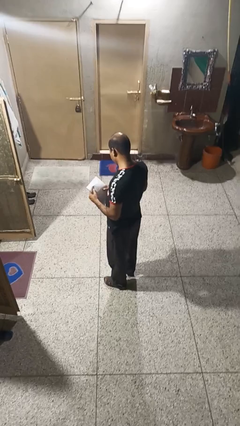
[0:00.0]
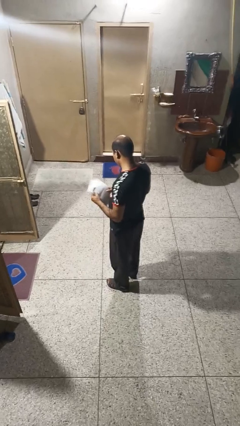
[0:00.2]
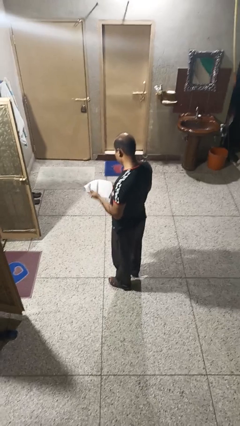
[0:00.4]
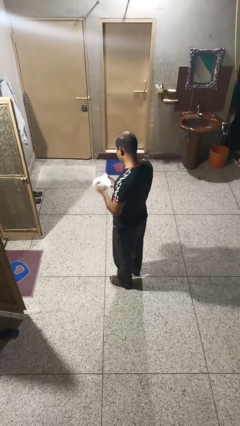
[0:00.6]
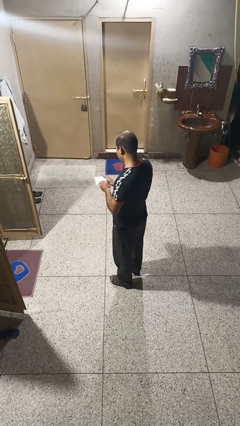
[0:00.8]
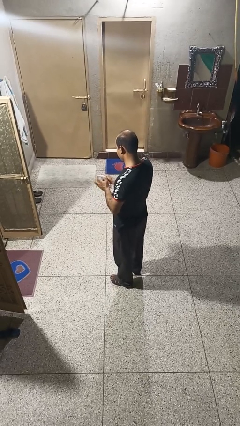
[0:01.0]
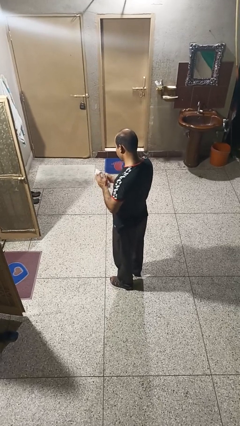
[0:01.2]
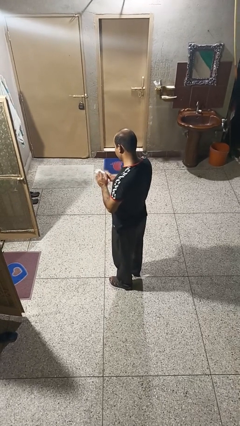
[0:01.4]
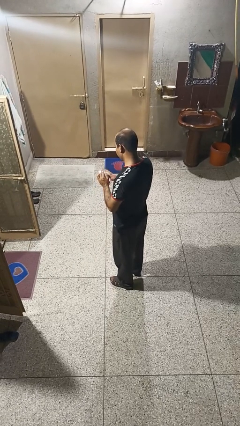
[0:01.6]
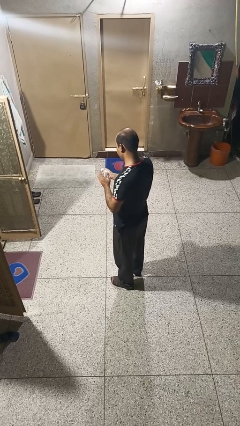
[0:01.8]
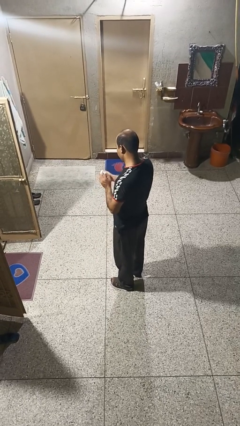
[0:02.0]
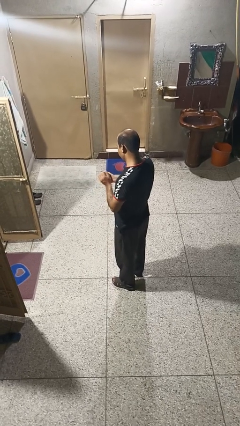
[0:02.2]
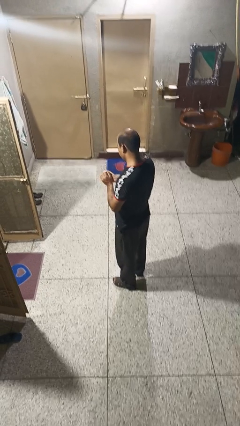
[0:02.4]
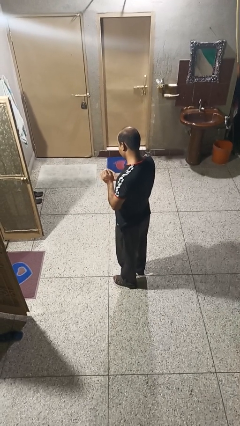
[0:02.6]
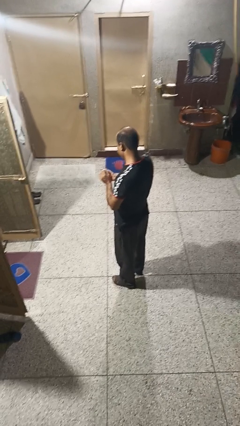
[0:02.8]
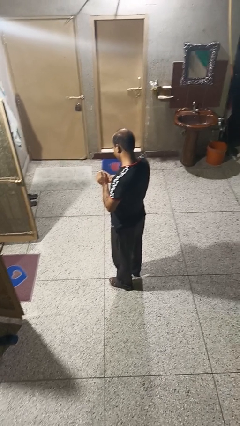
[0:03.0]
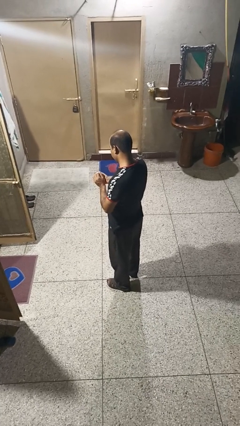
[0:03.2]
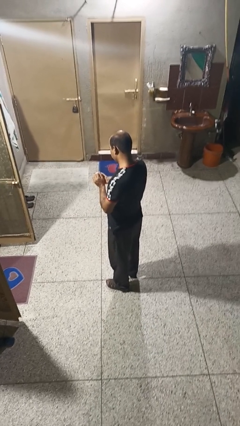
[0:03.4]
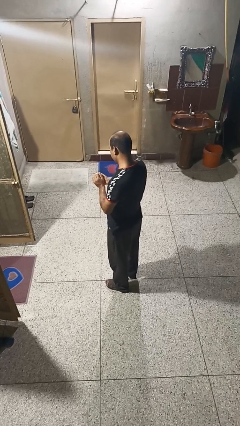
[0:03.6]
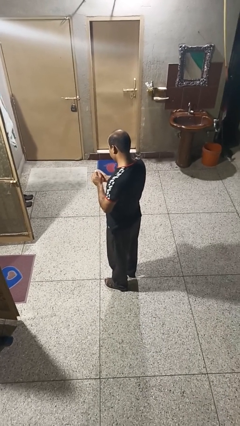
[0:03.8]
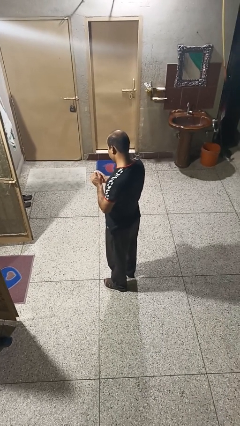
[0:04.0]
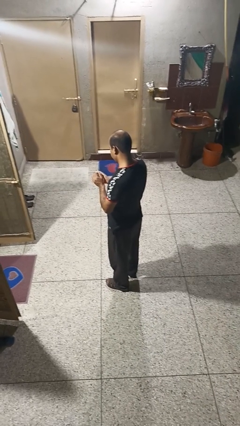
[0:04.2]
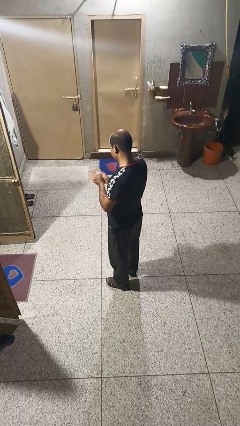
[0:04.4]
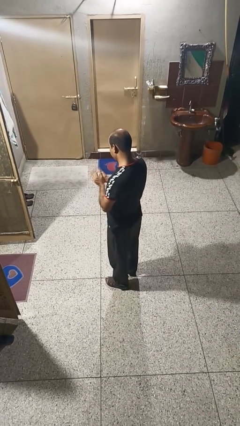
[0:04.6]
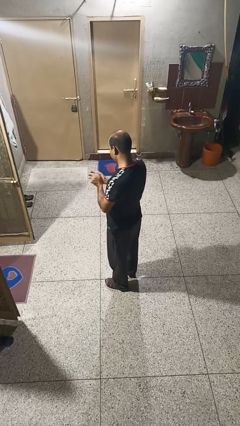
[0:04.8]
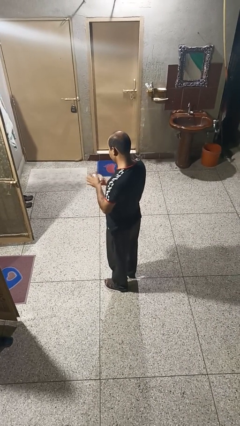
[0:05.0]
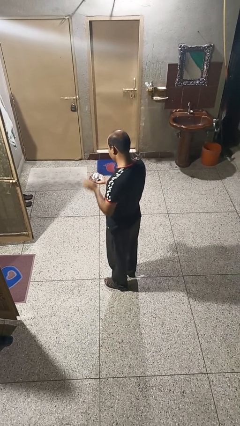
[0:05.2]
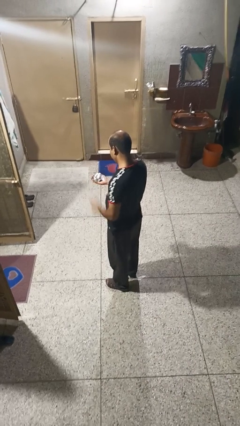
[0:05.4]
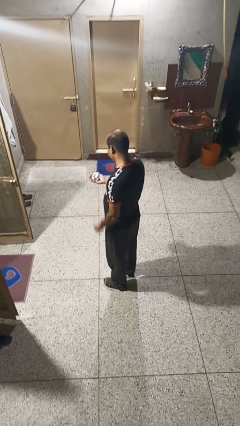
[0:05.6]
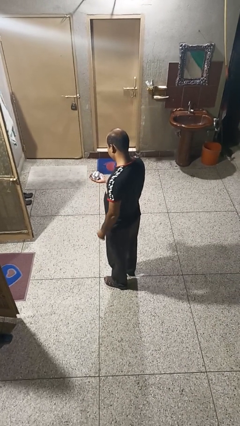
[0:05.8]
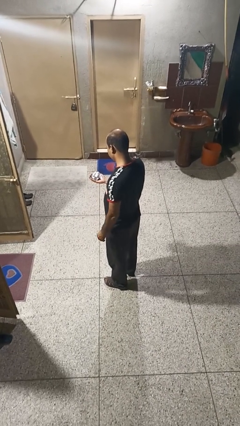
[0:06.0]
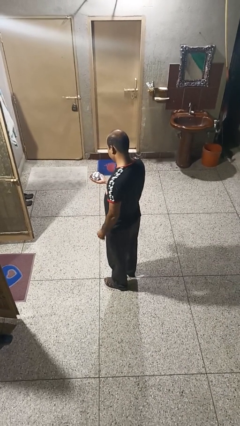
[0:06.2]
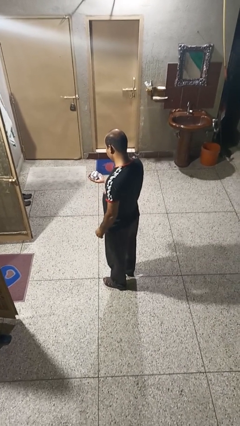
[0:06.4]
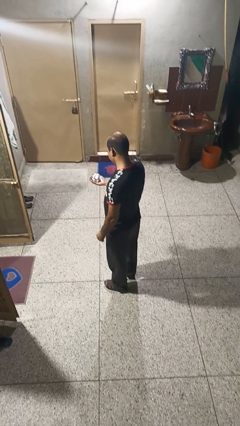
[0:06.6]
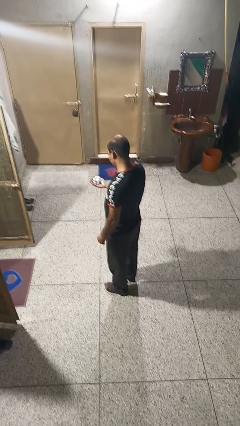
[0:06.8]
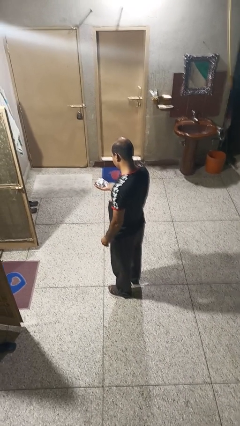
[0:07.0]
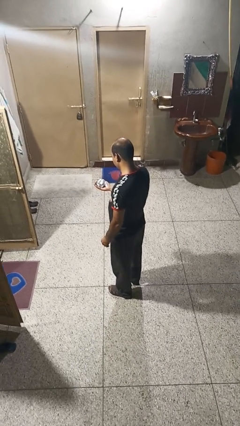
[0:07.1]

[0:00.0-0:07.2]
person crumples paper

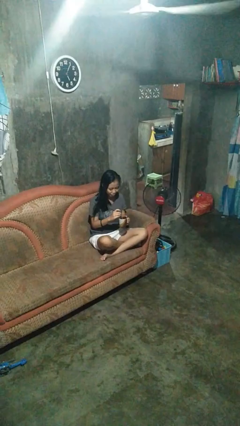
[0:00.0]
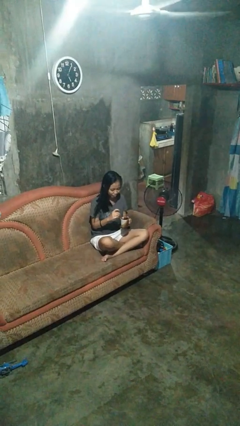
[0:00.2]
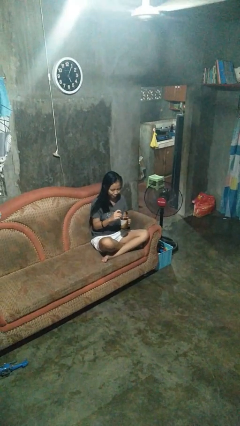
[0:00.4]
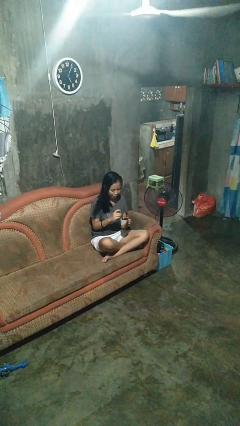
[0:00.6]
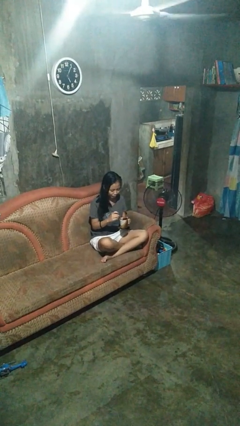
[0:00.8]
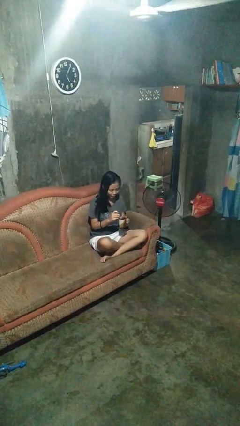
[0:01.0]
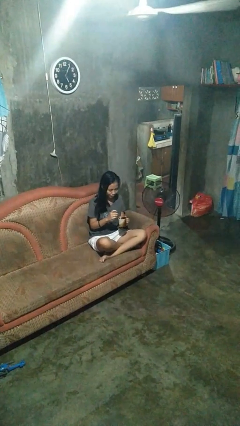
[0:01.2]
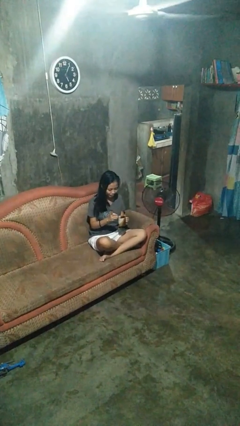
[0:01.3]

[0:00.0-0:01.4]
person stirs mug

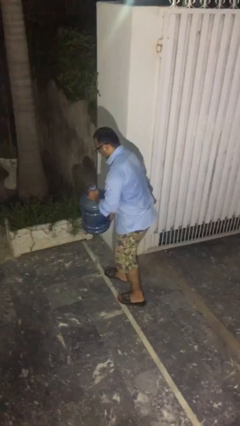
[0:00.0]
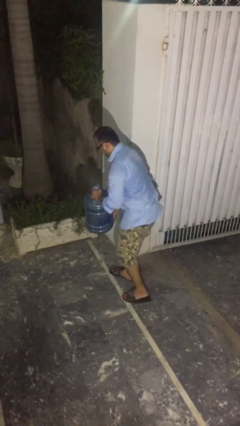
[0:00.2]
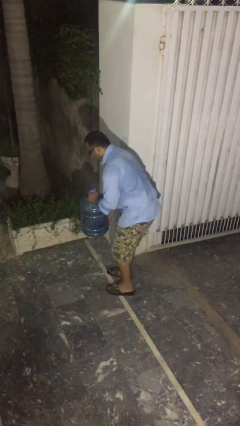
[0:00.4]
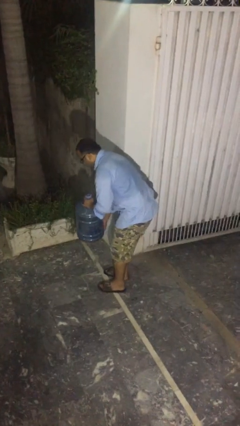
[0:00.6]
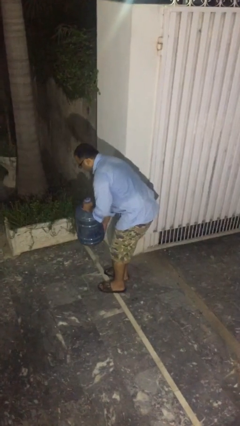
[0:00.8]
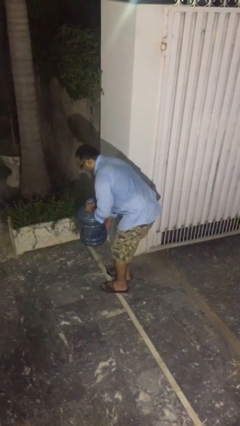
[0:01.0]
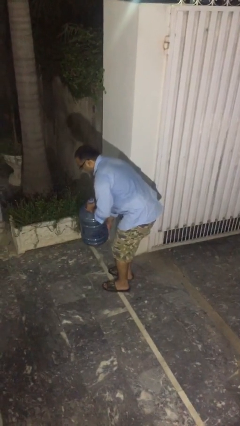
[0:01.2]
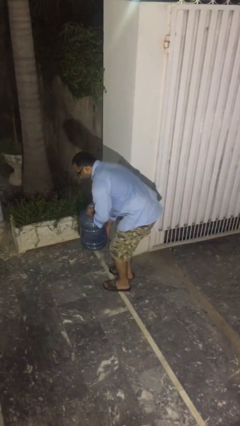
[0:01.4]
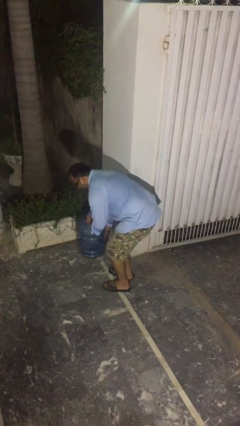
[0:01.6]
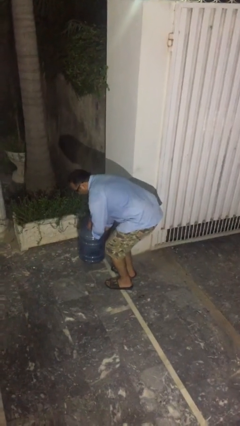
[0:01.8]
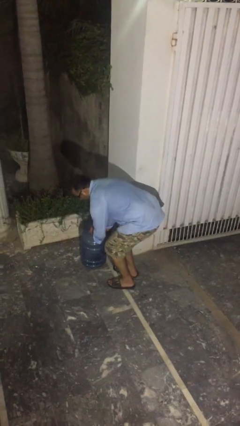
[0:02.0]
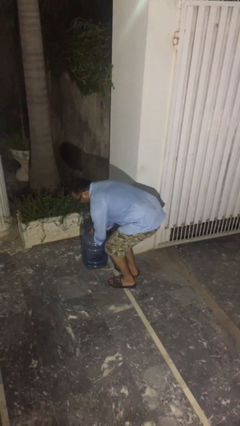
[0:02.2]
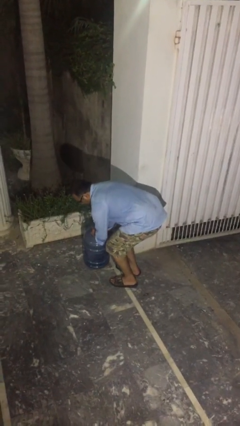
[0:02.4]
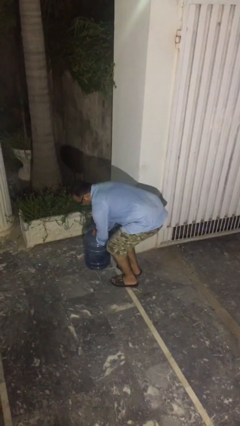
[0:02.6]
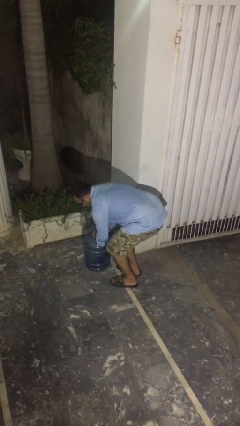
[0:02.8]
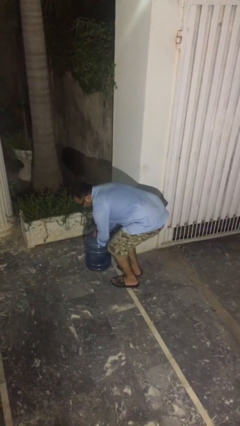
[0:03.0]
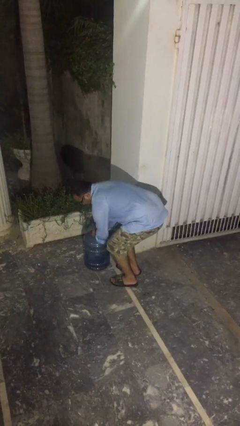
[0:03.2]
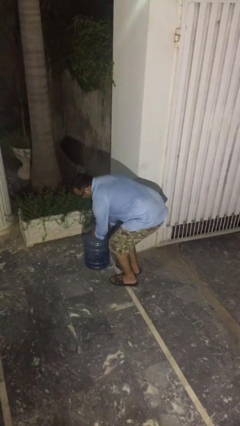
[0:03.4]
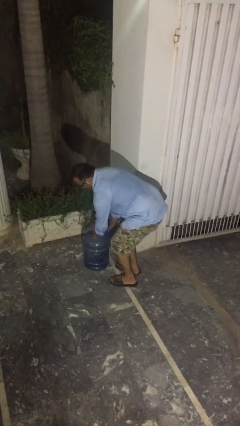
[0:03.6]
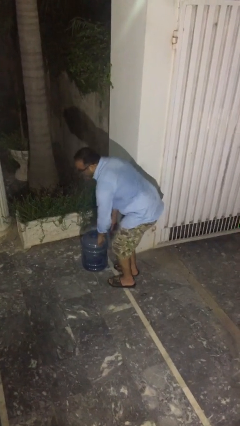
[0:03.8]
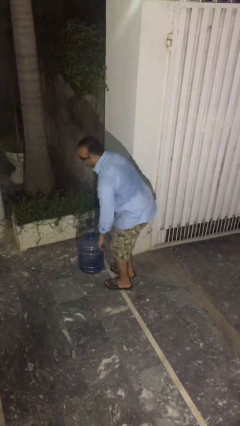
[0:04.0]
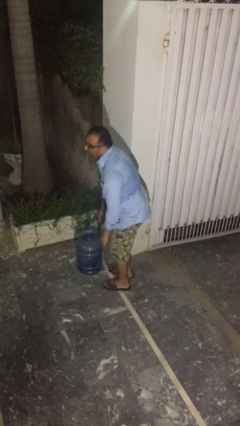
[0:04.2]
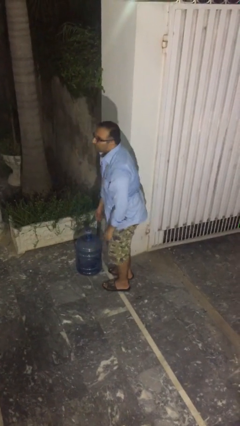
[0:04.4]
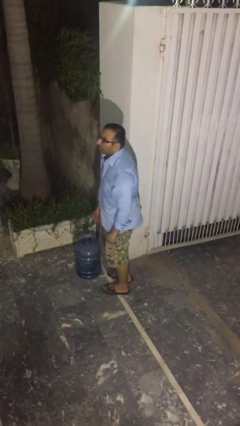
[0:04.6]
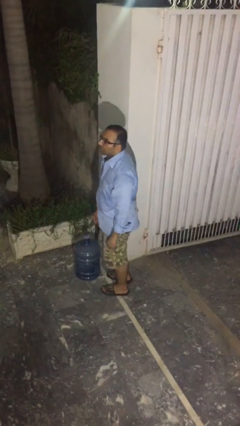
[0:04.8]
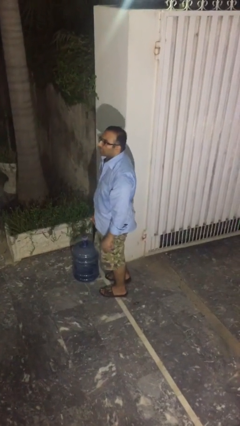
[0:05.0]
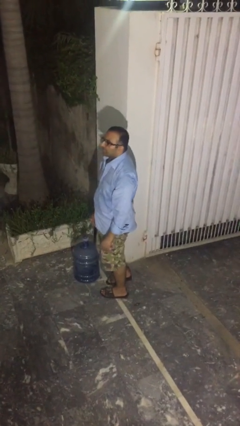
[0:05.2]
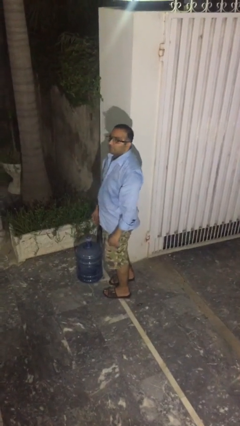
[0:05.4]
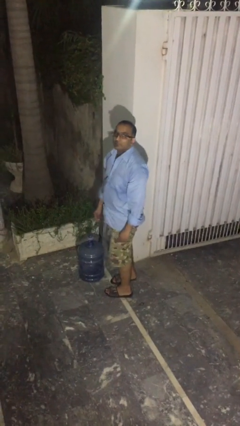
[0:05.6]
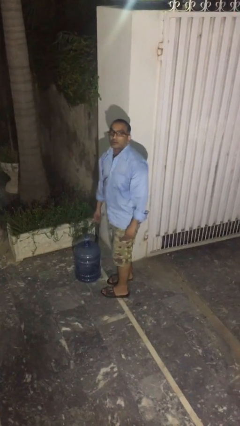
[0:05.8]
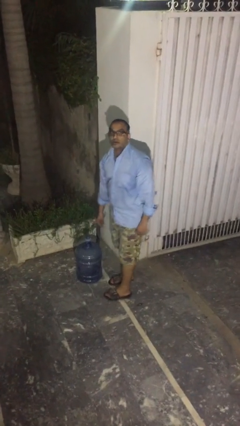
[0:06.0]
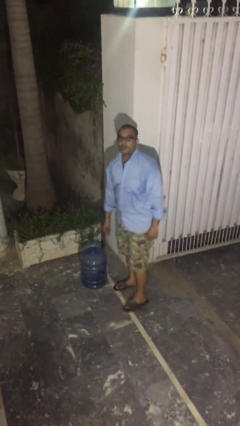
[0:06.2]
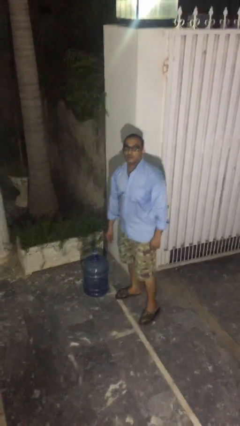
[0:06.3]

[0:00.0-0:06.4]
person puts down object on floor

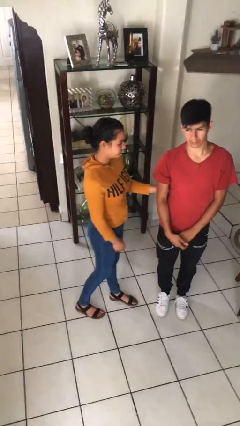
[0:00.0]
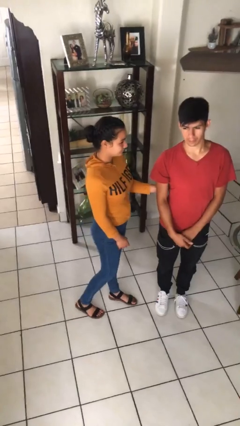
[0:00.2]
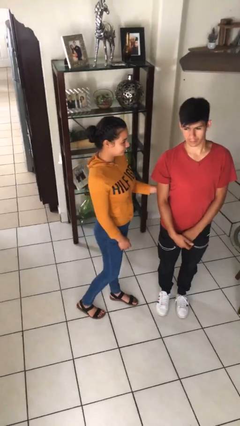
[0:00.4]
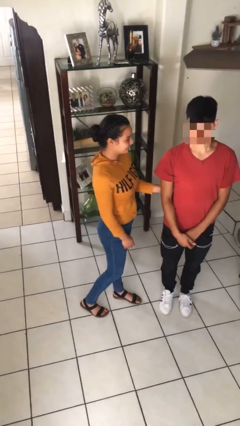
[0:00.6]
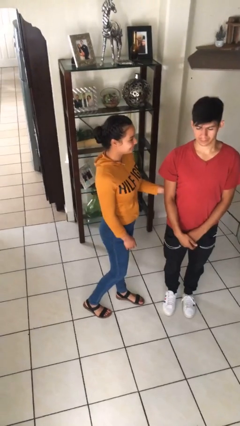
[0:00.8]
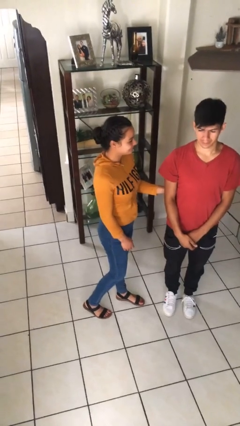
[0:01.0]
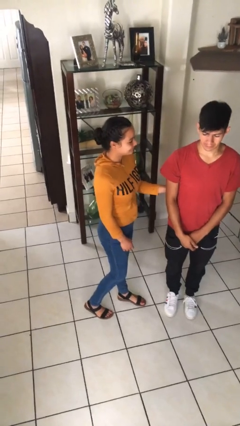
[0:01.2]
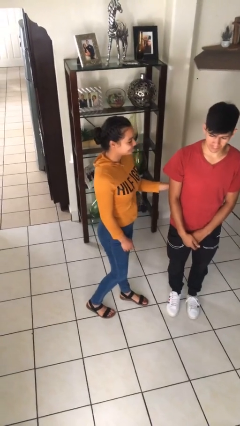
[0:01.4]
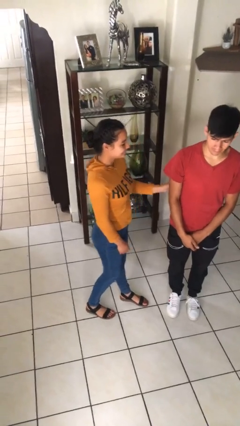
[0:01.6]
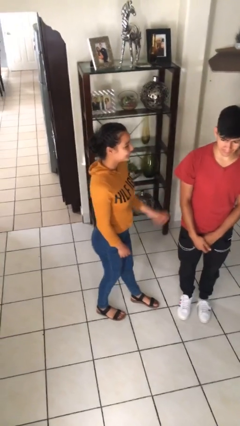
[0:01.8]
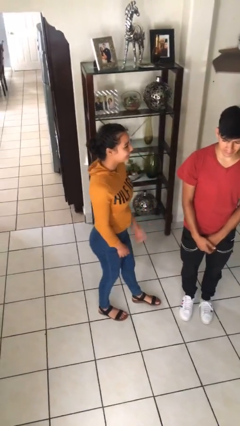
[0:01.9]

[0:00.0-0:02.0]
person tickles person

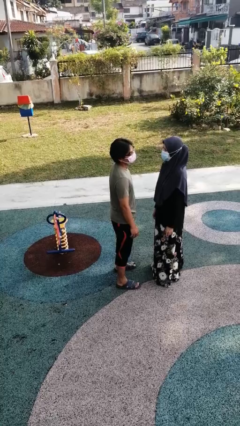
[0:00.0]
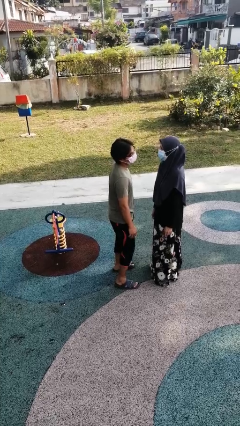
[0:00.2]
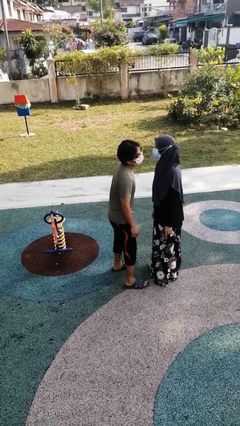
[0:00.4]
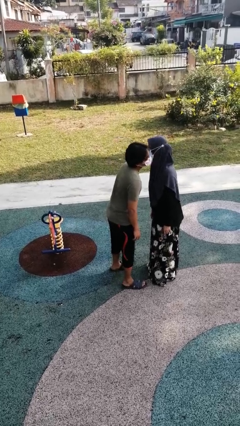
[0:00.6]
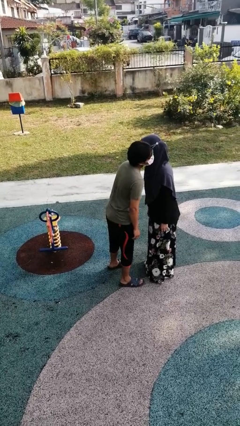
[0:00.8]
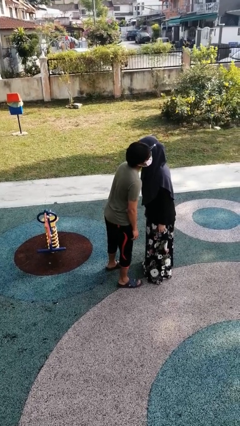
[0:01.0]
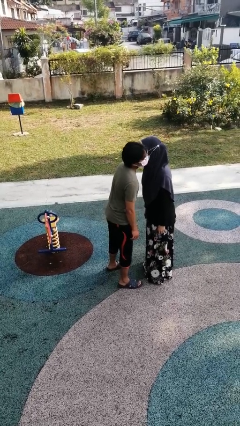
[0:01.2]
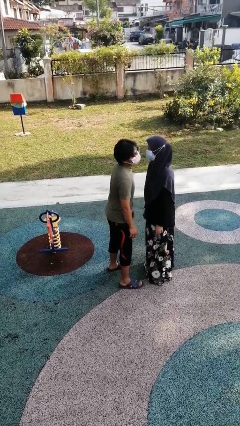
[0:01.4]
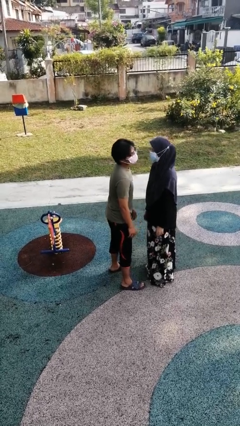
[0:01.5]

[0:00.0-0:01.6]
person kisses cheek of person
